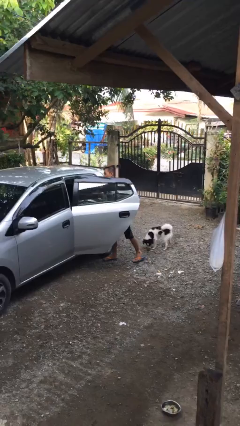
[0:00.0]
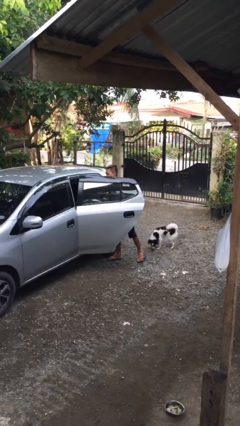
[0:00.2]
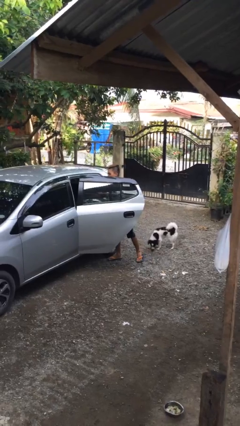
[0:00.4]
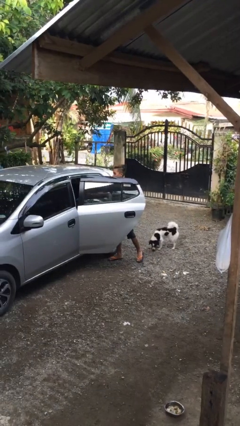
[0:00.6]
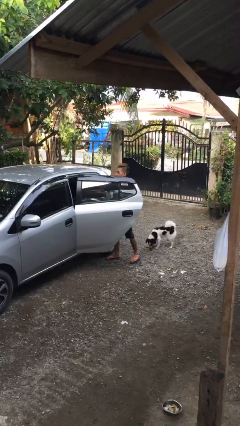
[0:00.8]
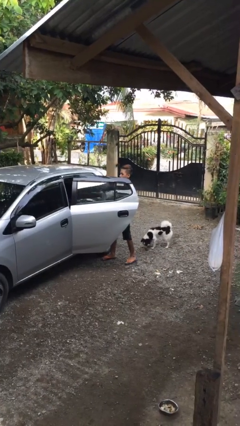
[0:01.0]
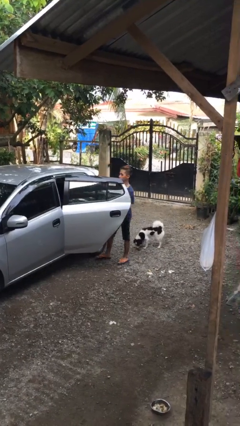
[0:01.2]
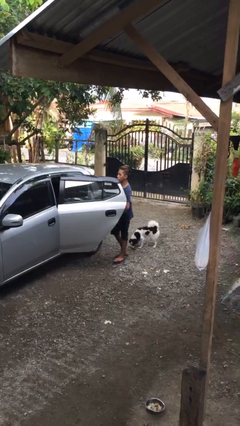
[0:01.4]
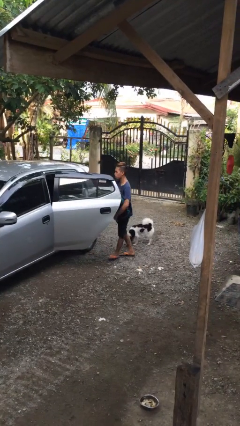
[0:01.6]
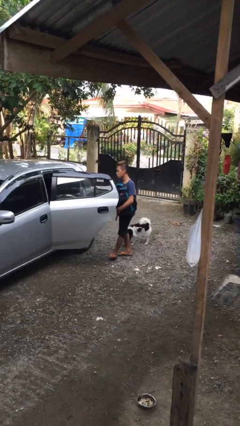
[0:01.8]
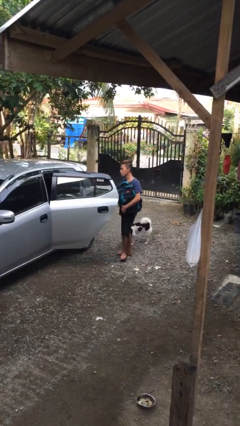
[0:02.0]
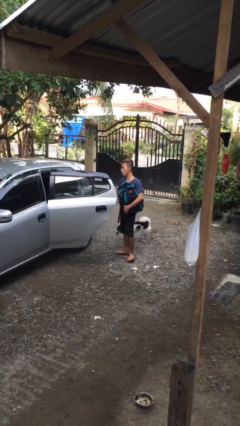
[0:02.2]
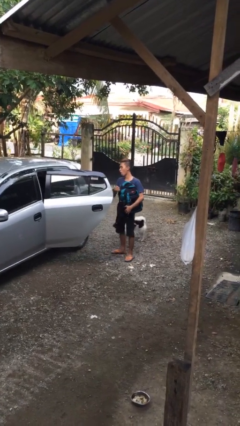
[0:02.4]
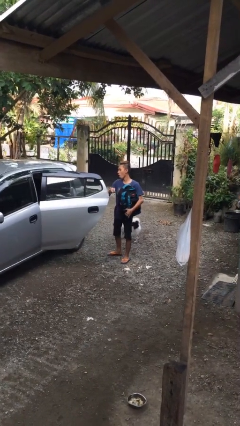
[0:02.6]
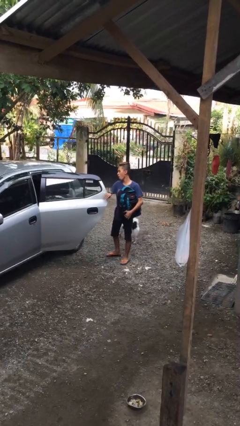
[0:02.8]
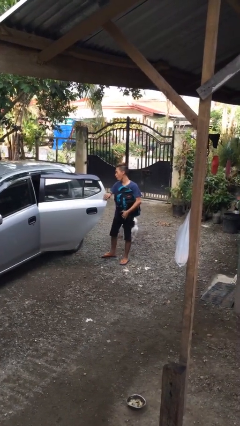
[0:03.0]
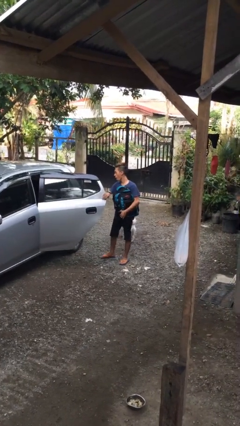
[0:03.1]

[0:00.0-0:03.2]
person unloads car

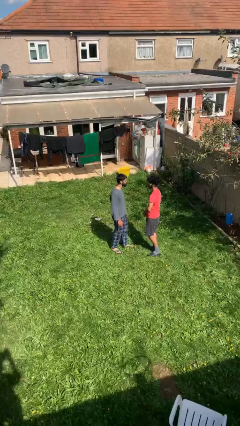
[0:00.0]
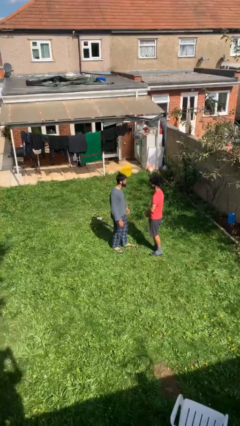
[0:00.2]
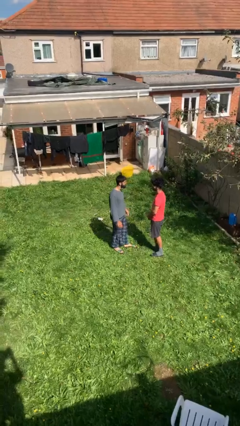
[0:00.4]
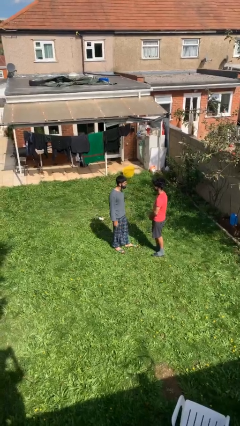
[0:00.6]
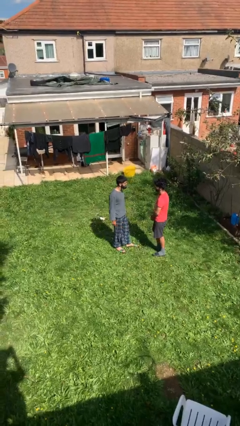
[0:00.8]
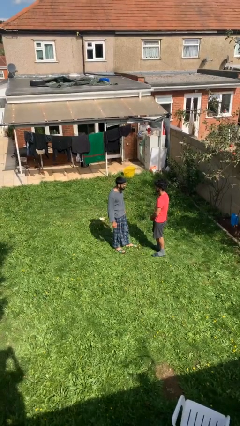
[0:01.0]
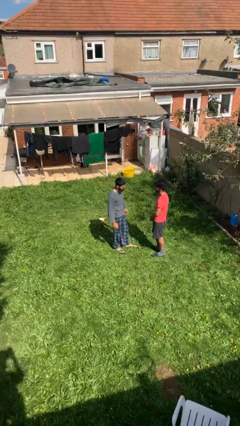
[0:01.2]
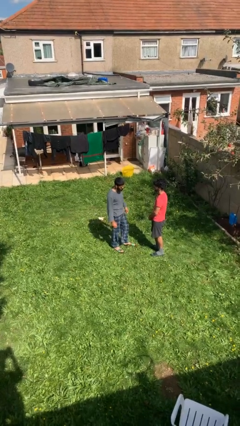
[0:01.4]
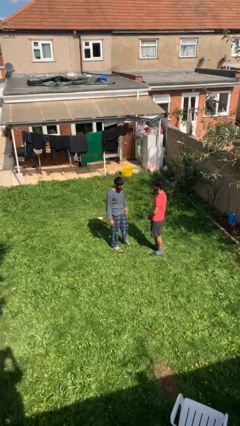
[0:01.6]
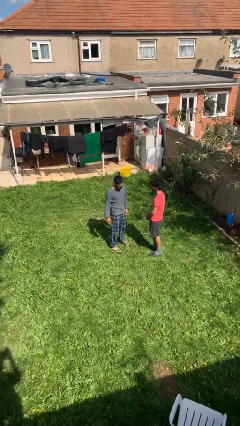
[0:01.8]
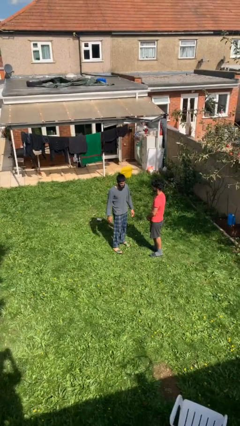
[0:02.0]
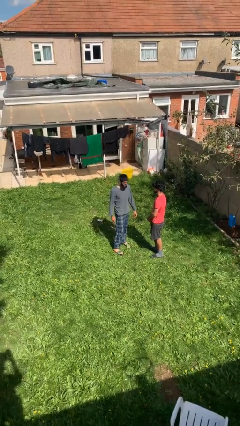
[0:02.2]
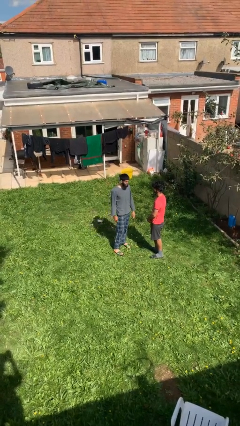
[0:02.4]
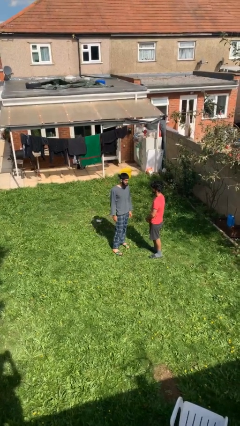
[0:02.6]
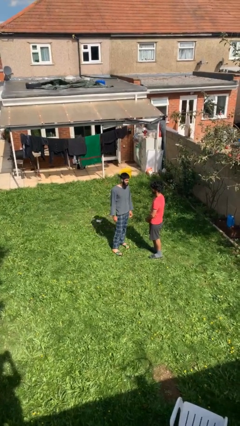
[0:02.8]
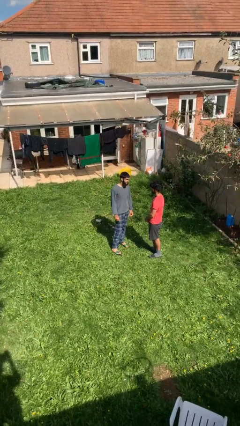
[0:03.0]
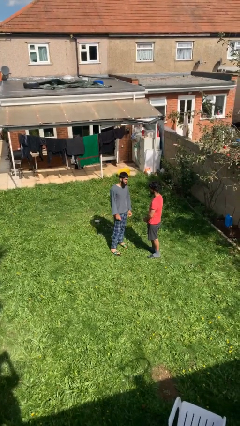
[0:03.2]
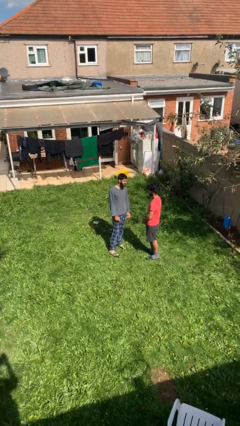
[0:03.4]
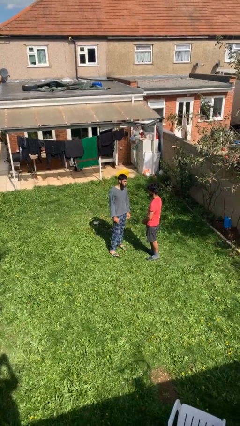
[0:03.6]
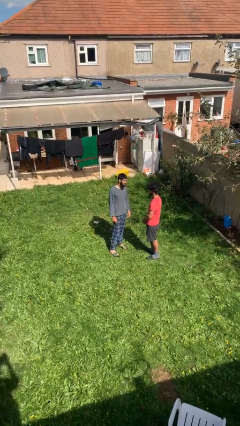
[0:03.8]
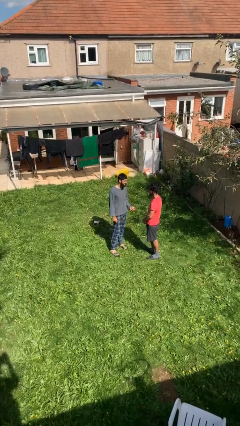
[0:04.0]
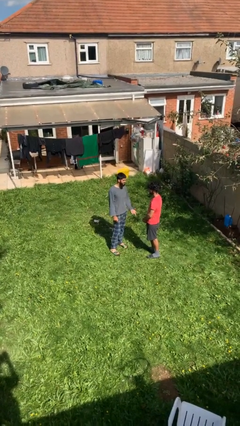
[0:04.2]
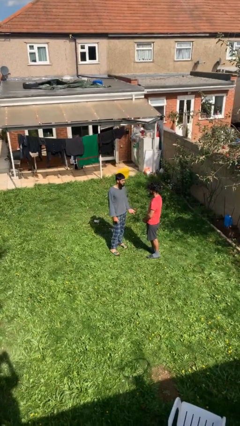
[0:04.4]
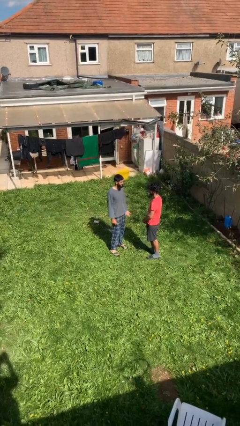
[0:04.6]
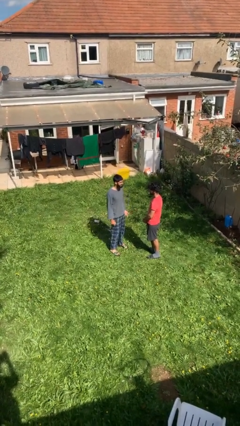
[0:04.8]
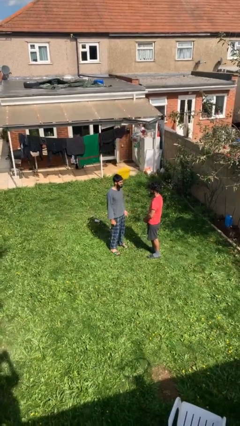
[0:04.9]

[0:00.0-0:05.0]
person talks to person

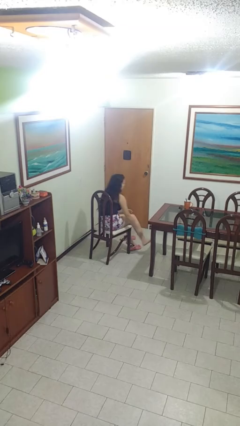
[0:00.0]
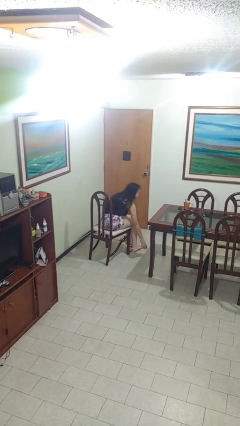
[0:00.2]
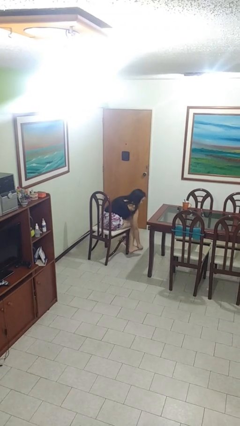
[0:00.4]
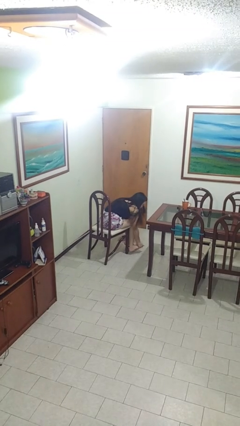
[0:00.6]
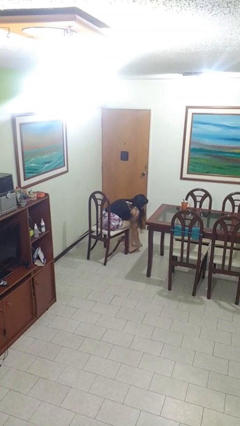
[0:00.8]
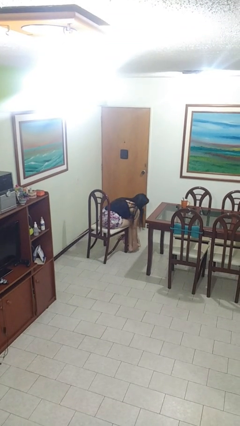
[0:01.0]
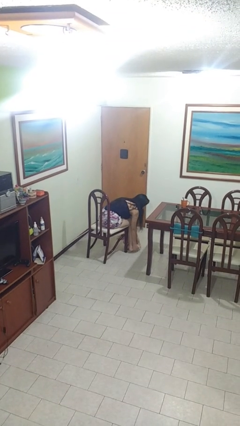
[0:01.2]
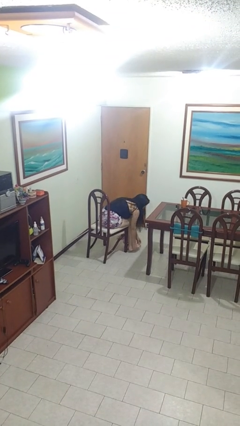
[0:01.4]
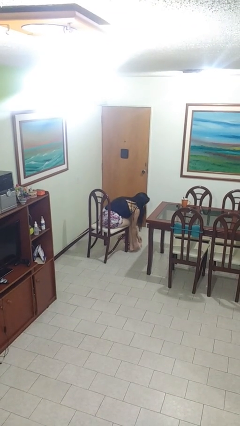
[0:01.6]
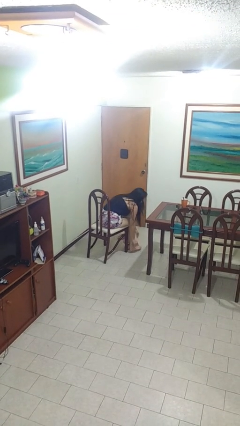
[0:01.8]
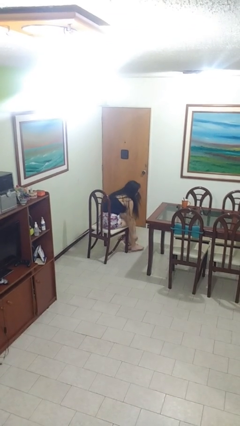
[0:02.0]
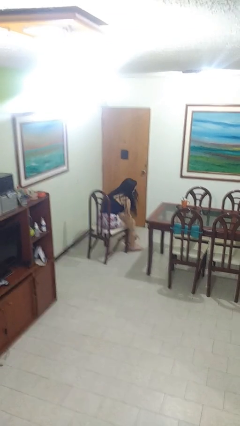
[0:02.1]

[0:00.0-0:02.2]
person rubs foot

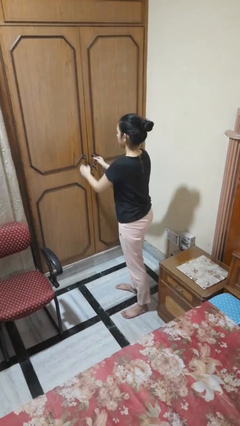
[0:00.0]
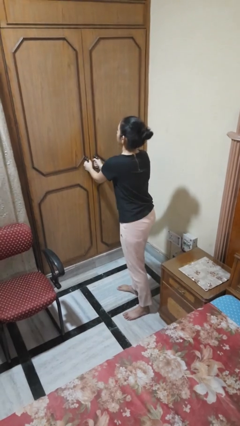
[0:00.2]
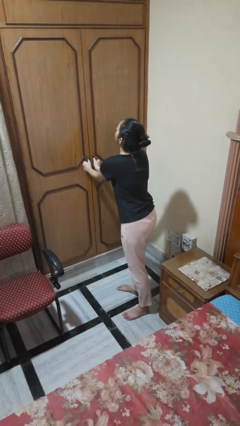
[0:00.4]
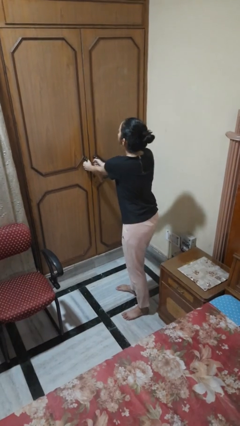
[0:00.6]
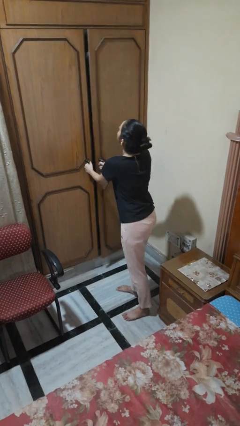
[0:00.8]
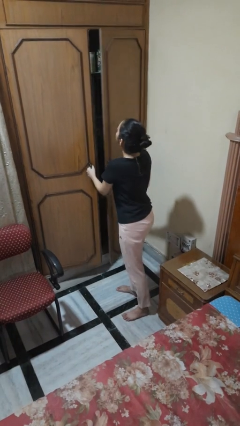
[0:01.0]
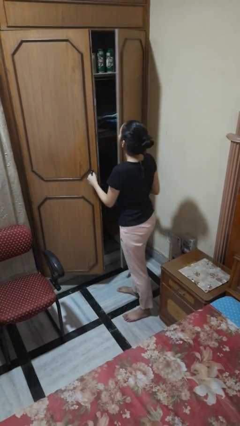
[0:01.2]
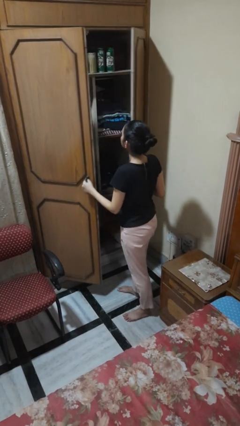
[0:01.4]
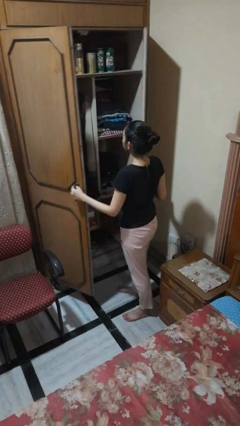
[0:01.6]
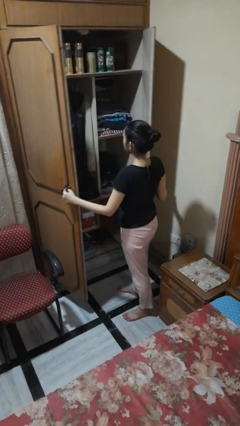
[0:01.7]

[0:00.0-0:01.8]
person opens closet door

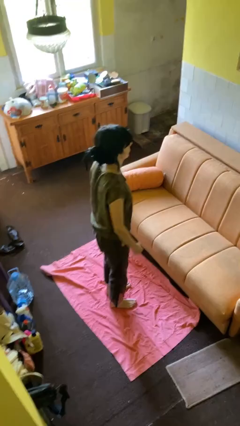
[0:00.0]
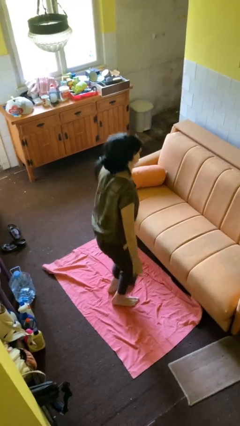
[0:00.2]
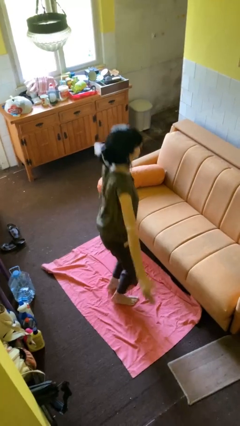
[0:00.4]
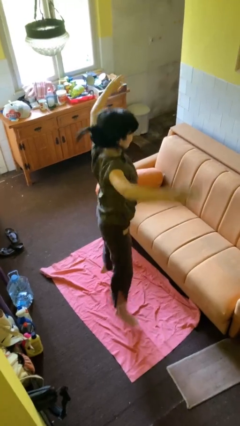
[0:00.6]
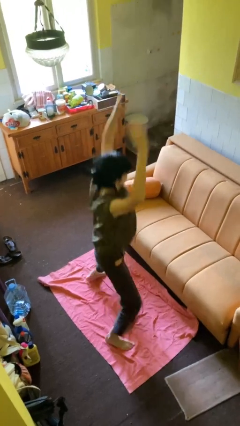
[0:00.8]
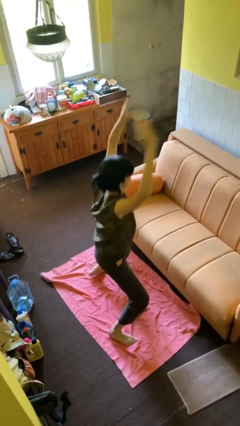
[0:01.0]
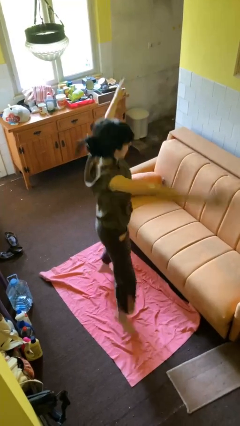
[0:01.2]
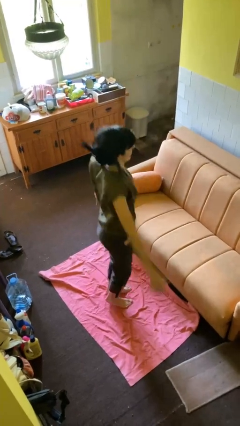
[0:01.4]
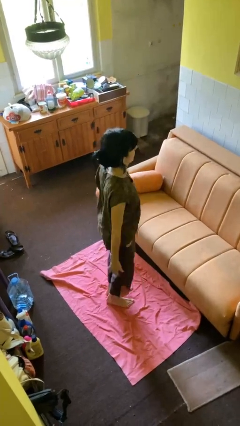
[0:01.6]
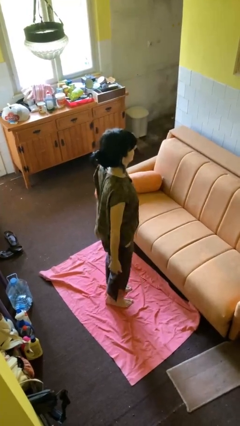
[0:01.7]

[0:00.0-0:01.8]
person exercises with jumping jacks

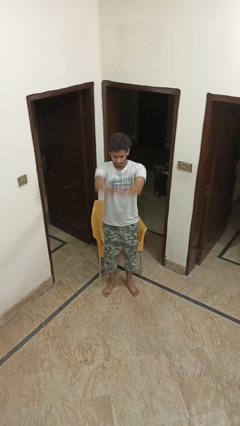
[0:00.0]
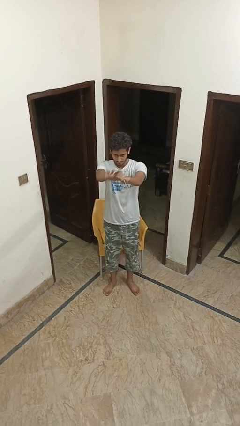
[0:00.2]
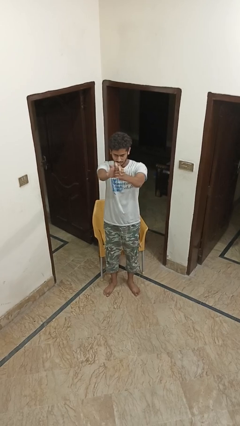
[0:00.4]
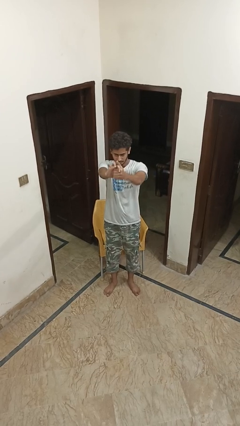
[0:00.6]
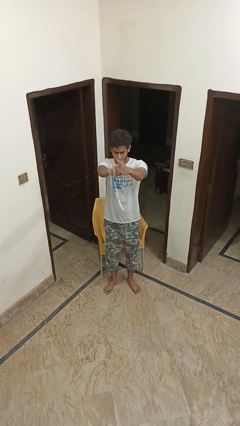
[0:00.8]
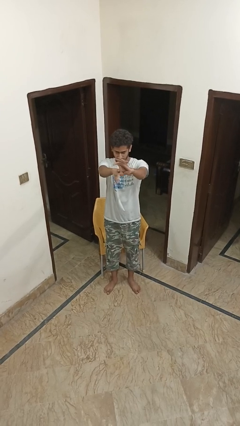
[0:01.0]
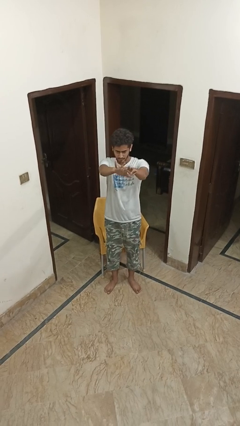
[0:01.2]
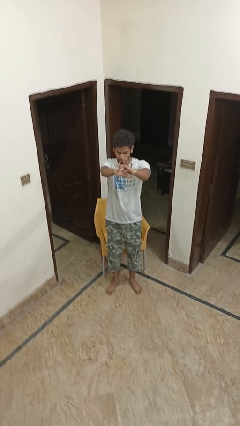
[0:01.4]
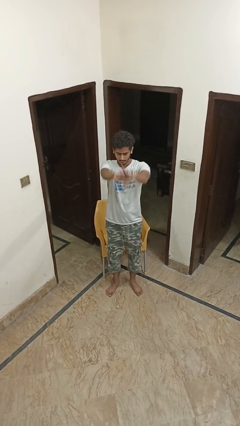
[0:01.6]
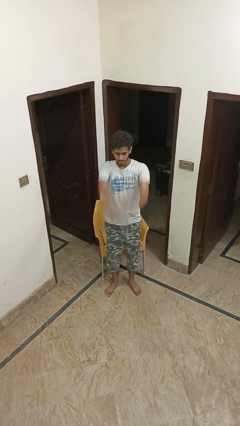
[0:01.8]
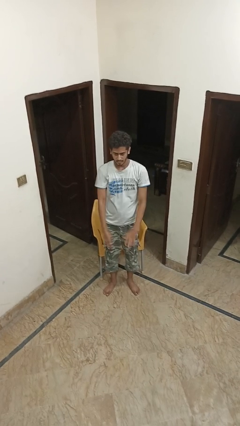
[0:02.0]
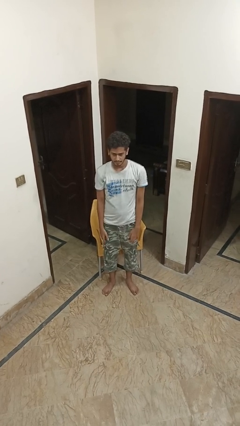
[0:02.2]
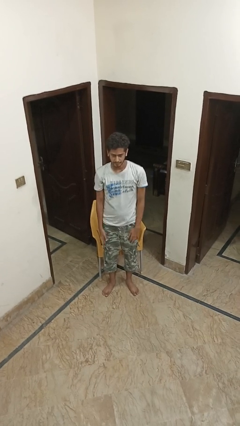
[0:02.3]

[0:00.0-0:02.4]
person cracks knuckles

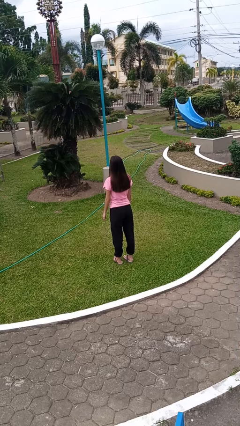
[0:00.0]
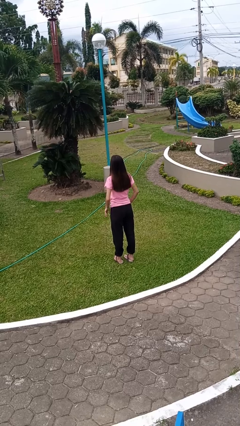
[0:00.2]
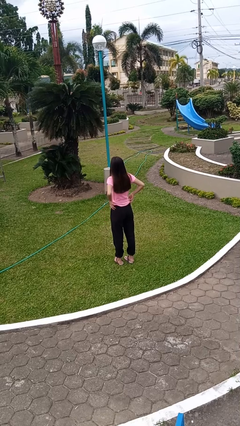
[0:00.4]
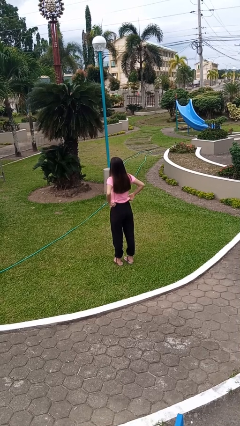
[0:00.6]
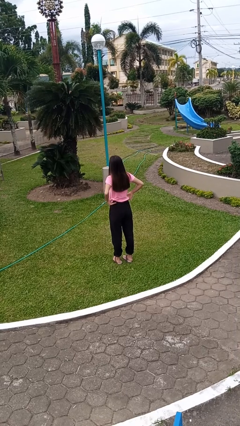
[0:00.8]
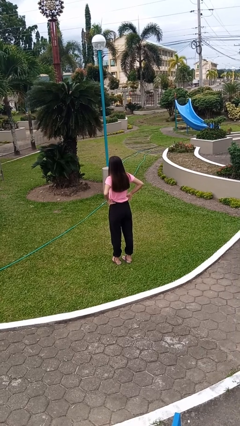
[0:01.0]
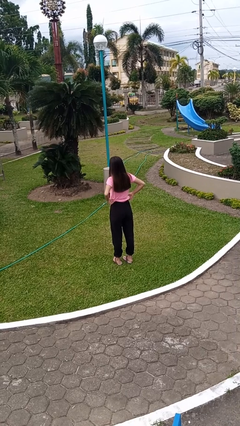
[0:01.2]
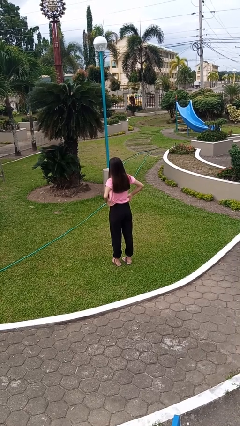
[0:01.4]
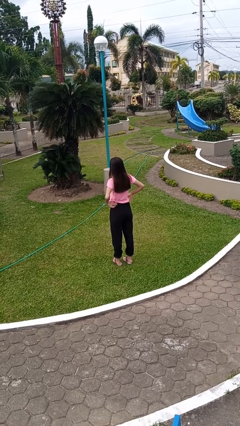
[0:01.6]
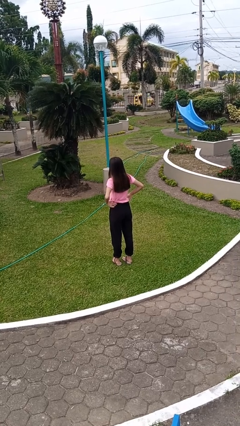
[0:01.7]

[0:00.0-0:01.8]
person hikes up pants
